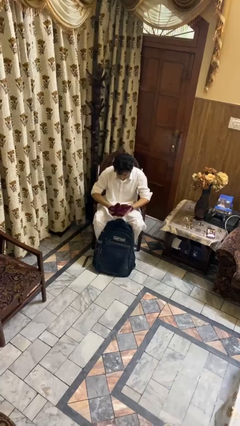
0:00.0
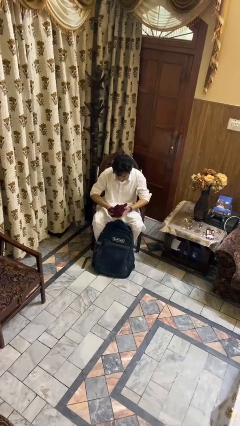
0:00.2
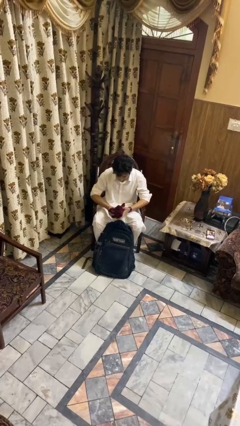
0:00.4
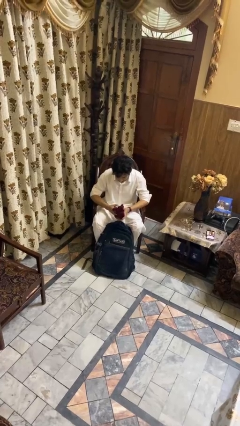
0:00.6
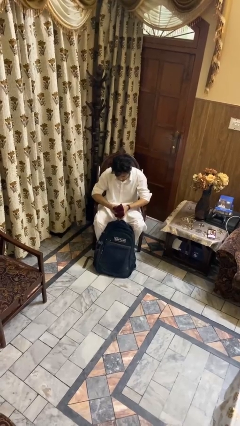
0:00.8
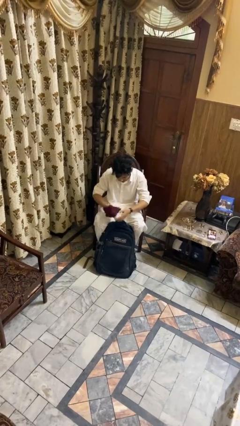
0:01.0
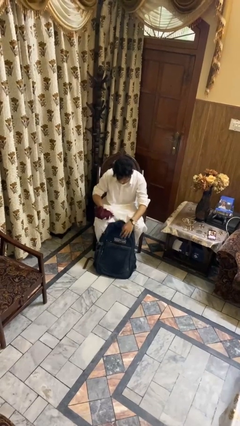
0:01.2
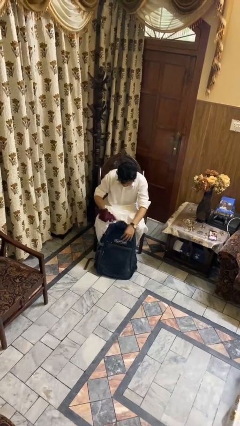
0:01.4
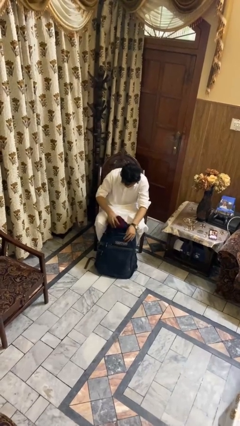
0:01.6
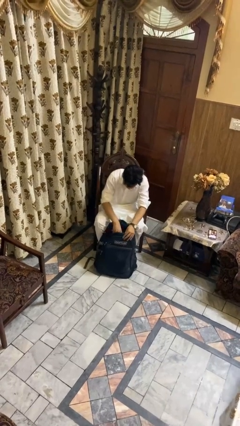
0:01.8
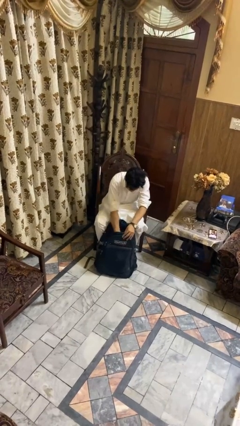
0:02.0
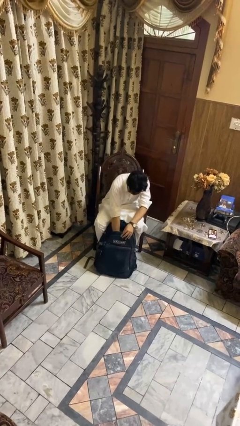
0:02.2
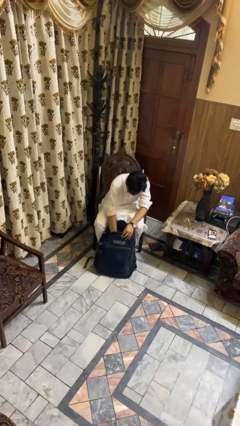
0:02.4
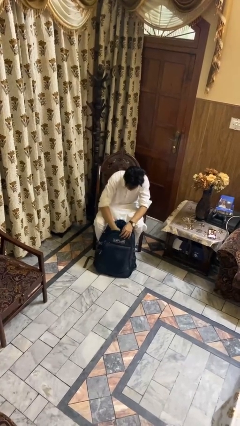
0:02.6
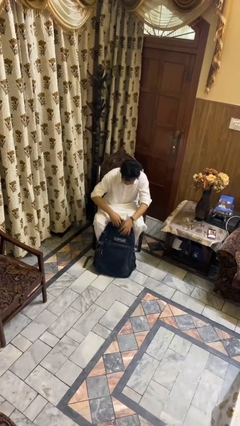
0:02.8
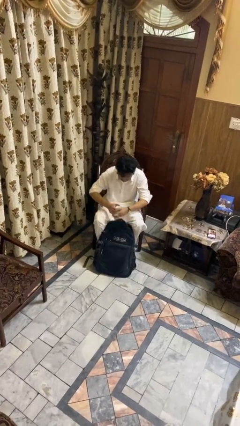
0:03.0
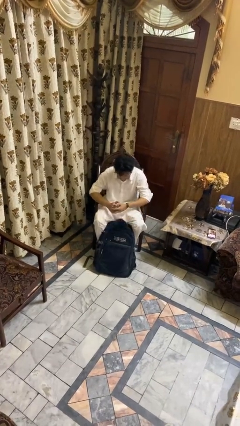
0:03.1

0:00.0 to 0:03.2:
person puts object into backpack

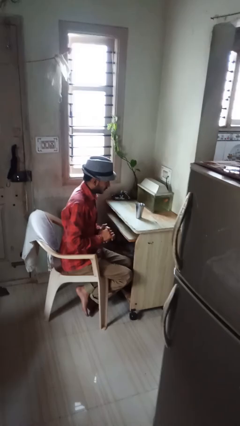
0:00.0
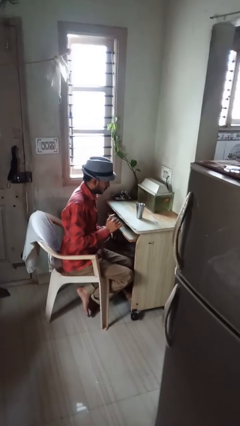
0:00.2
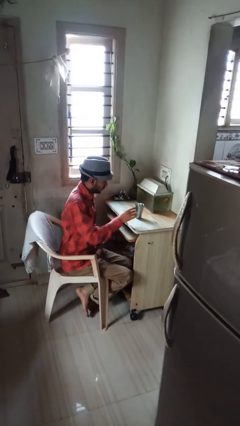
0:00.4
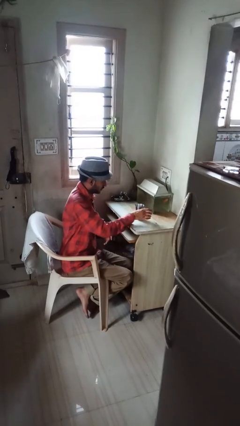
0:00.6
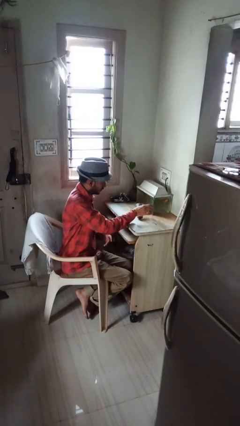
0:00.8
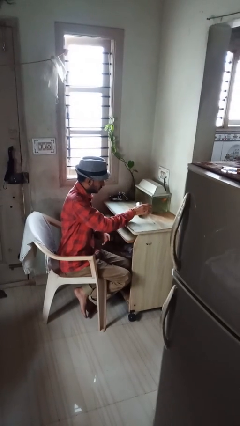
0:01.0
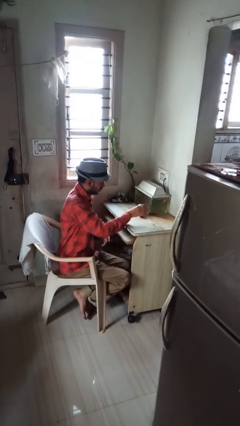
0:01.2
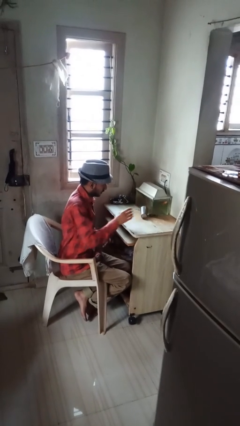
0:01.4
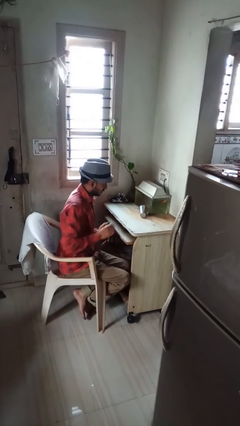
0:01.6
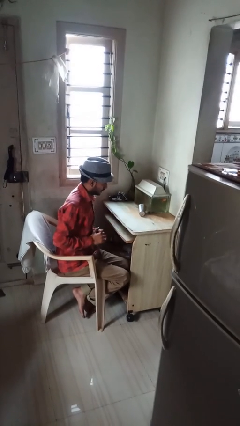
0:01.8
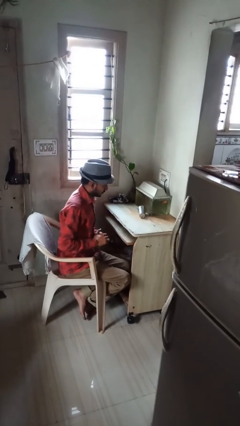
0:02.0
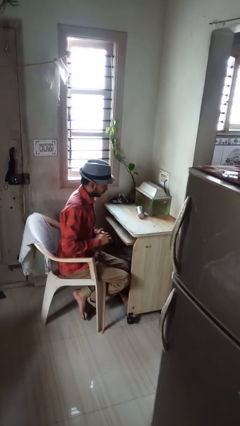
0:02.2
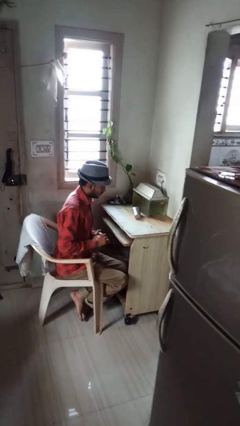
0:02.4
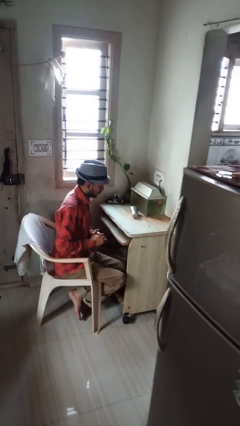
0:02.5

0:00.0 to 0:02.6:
person knocks over glass

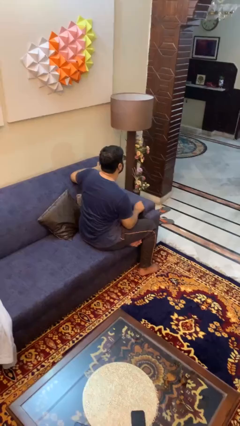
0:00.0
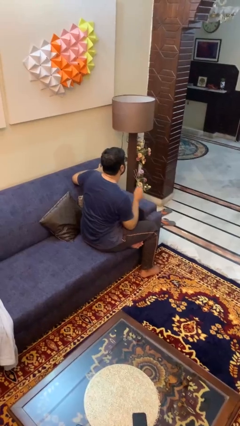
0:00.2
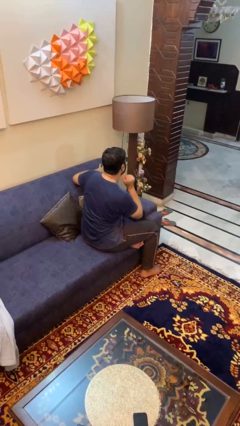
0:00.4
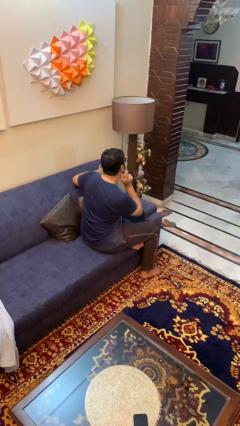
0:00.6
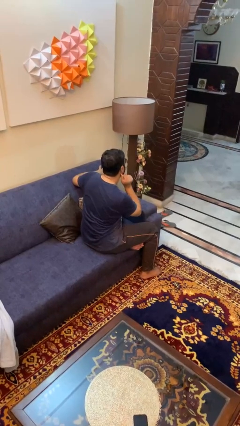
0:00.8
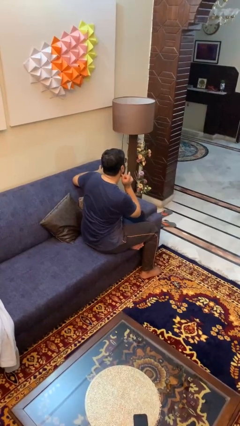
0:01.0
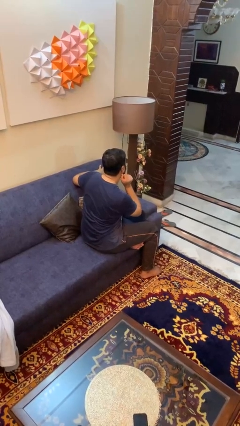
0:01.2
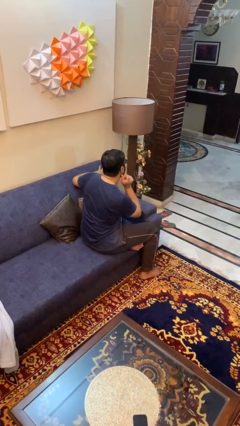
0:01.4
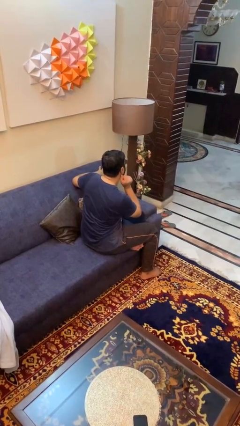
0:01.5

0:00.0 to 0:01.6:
person touches earlobe

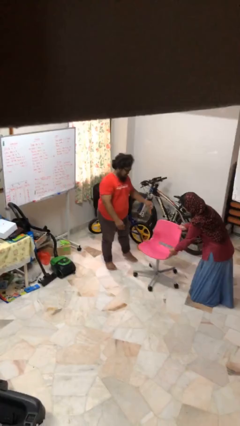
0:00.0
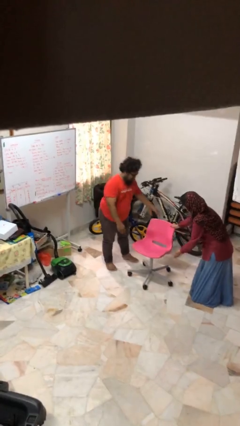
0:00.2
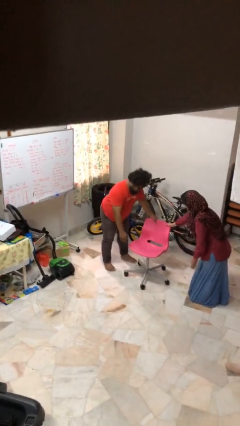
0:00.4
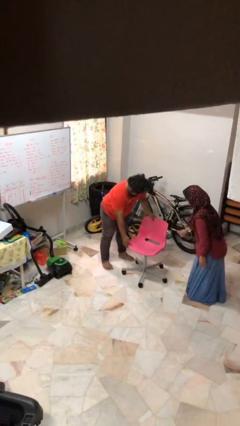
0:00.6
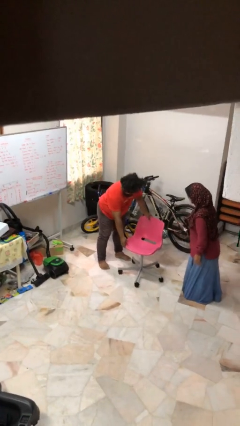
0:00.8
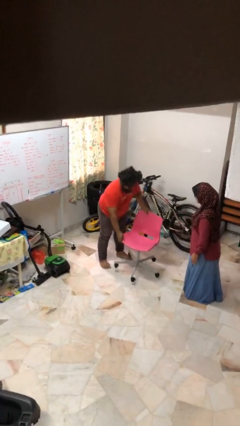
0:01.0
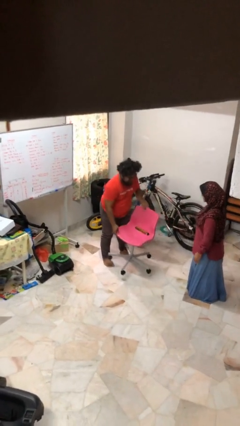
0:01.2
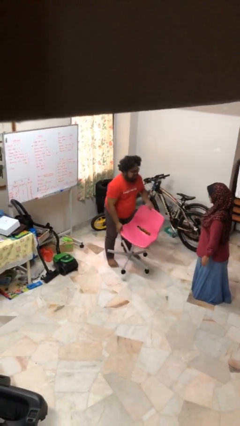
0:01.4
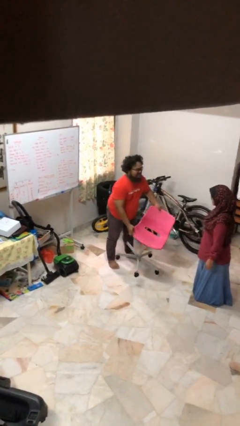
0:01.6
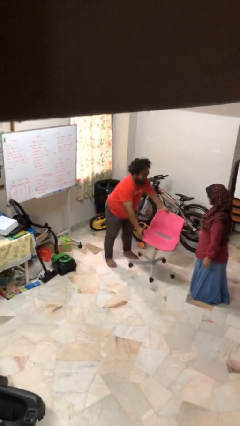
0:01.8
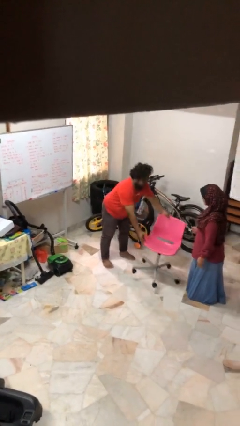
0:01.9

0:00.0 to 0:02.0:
person transfers object to person

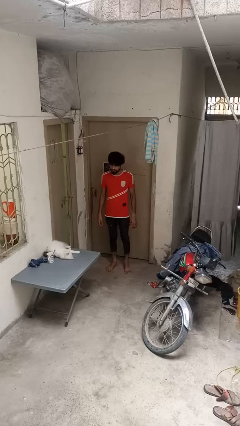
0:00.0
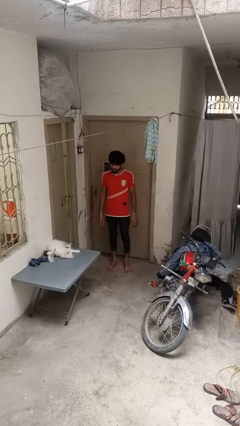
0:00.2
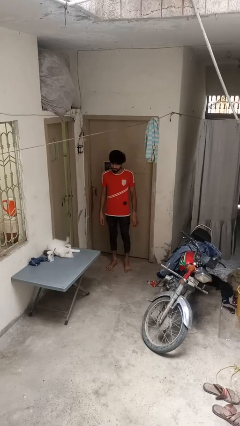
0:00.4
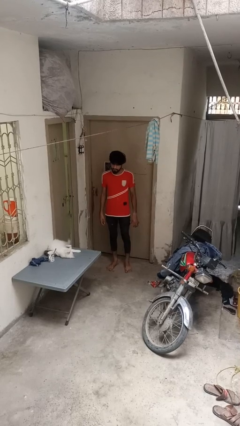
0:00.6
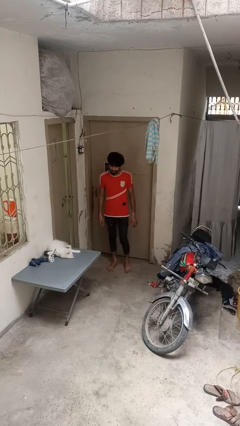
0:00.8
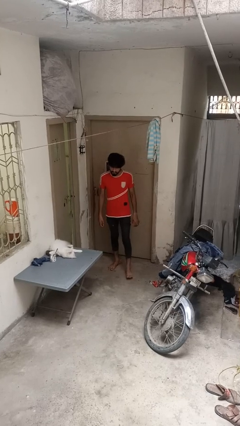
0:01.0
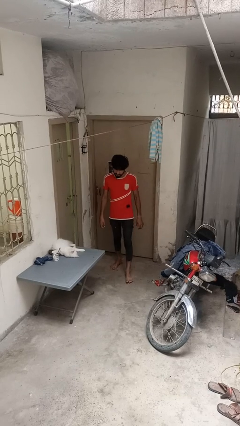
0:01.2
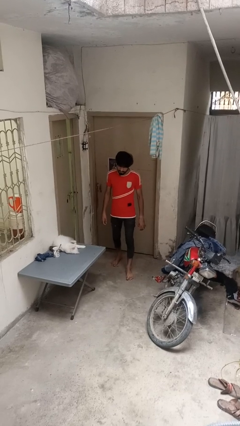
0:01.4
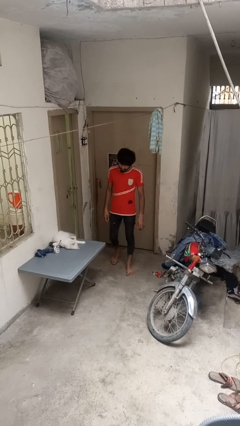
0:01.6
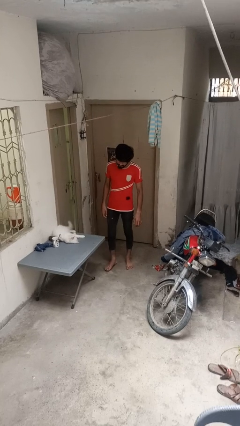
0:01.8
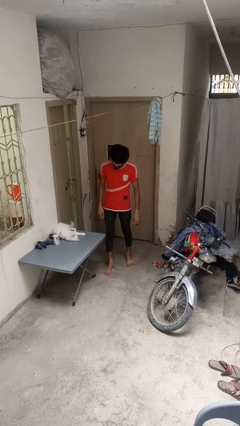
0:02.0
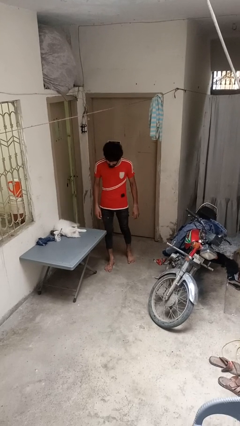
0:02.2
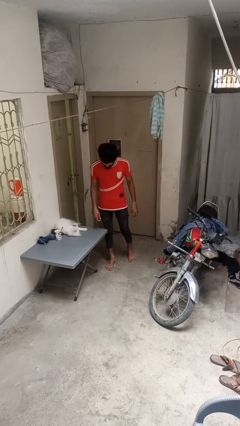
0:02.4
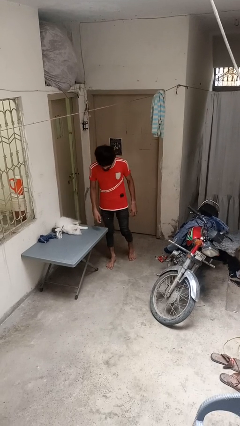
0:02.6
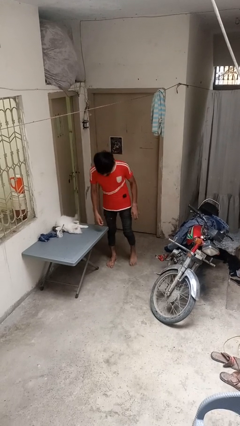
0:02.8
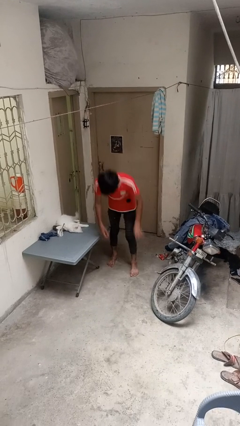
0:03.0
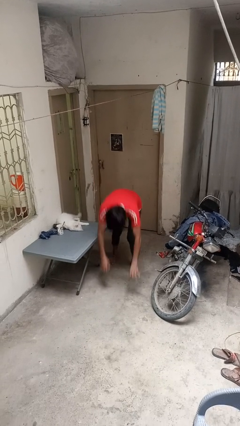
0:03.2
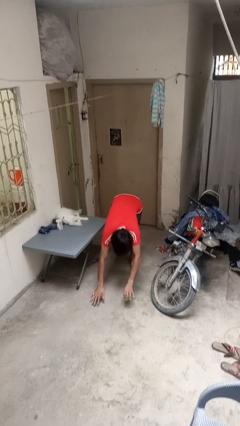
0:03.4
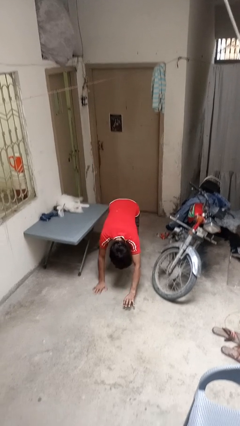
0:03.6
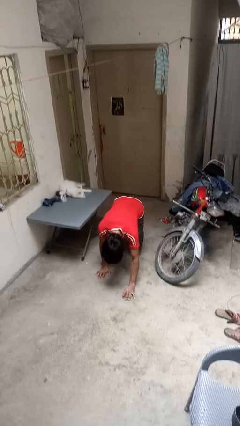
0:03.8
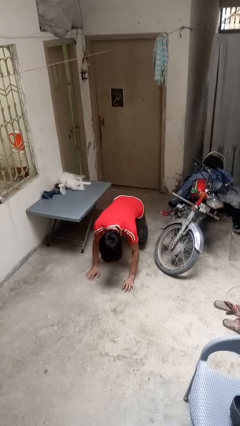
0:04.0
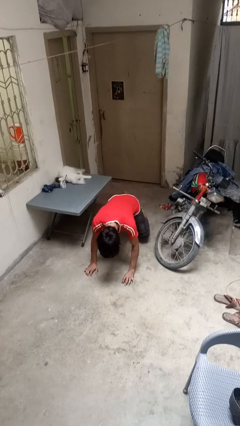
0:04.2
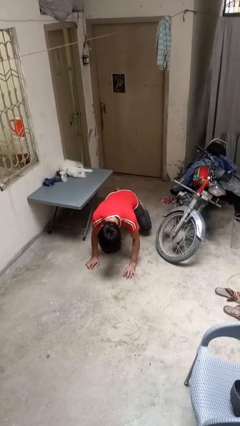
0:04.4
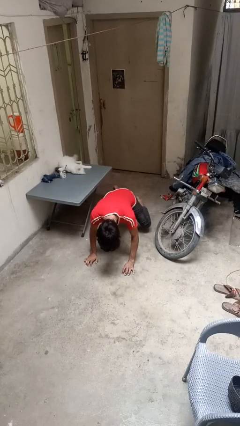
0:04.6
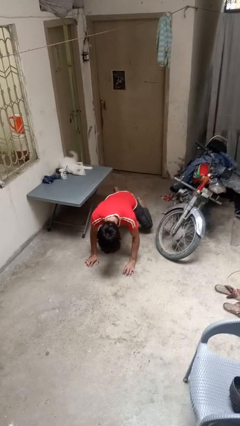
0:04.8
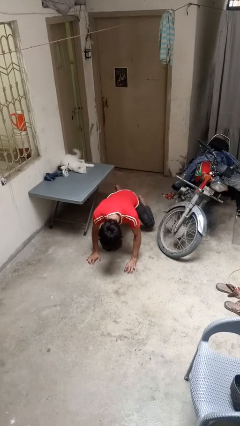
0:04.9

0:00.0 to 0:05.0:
person trips on object on floor

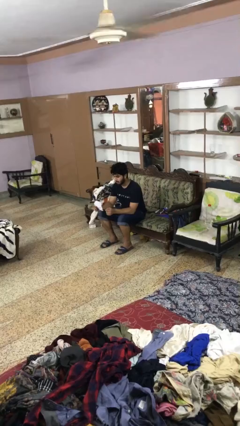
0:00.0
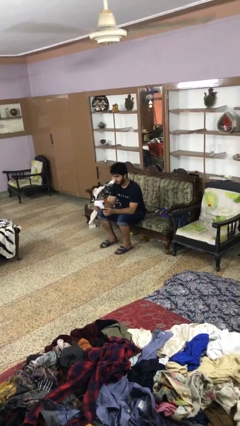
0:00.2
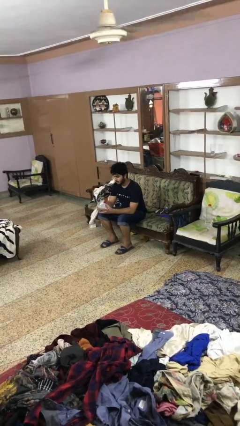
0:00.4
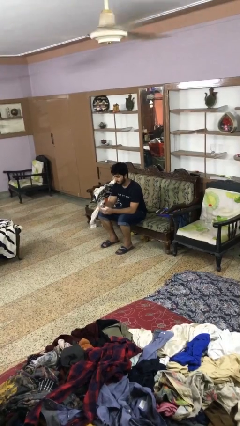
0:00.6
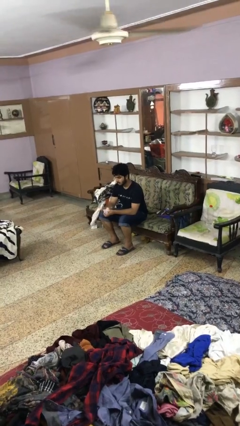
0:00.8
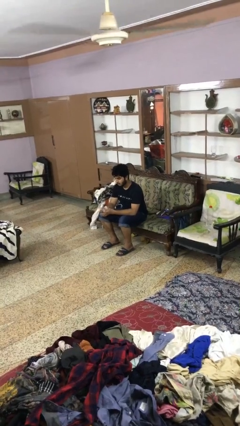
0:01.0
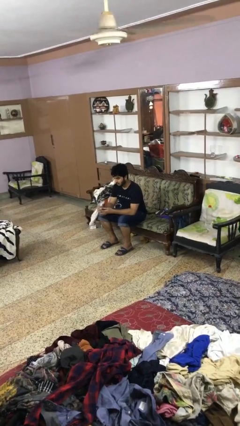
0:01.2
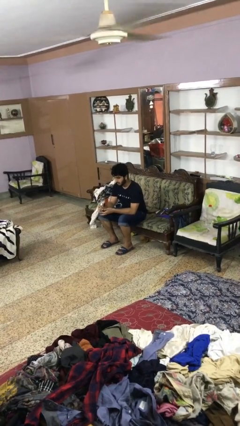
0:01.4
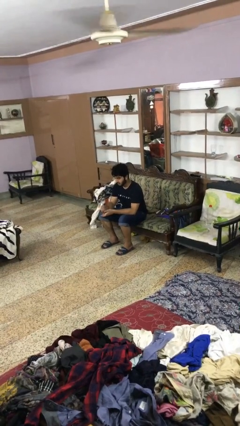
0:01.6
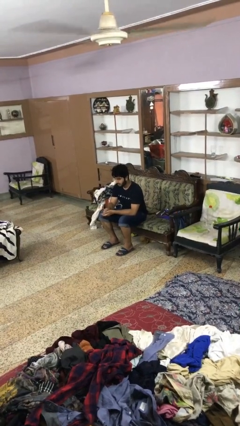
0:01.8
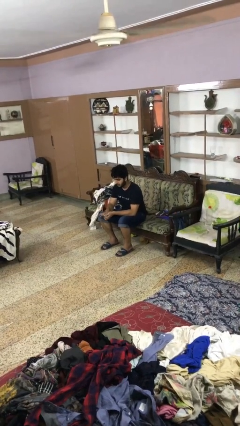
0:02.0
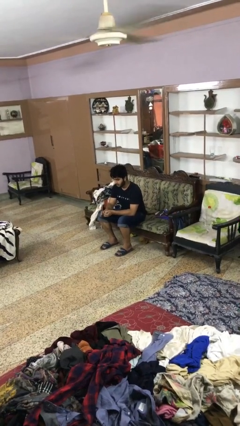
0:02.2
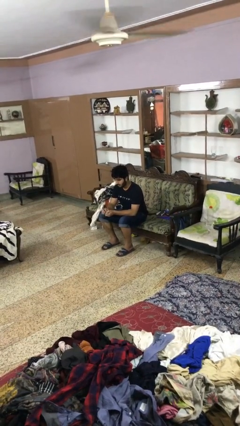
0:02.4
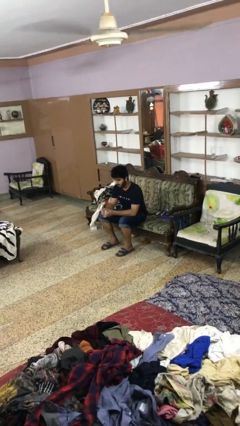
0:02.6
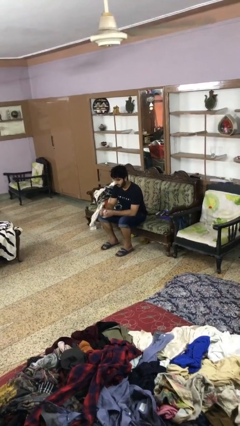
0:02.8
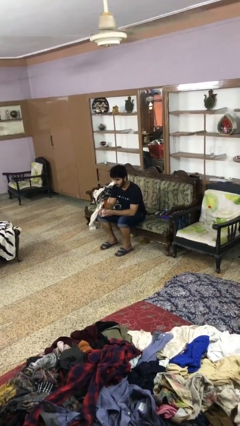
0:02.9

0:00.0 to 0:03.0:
person crumples paper
